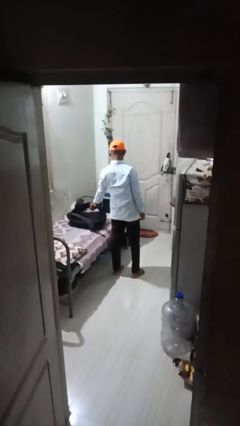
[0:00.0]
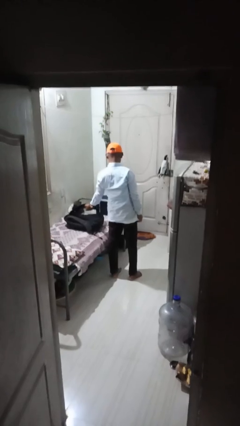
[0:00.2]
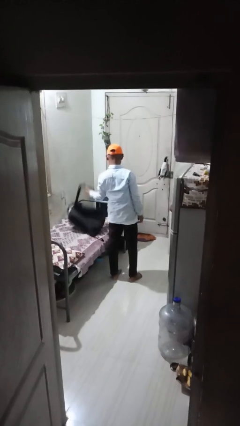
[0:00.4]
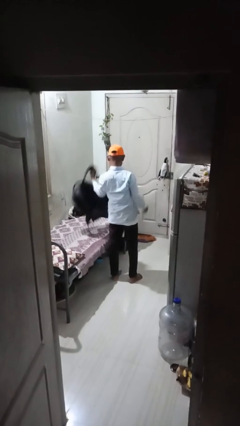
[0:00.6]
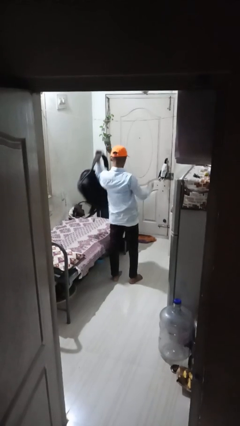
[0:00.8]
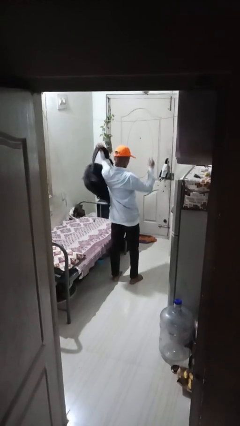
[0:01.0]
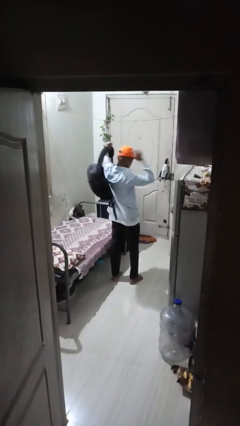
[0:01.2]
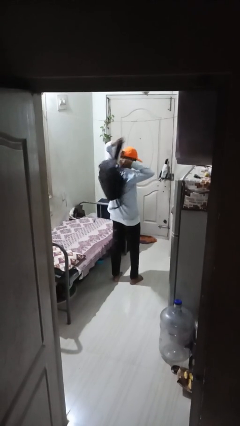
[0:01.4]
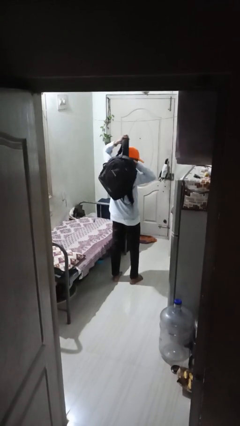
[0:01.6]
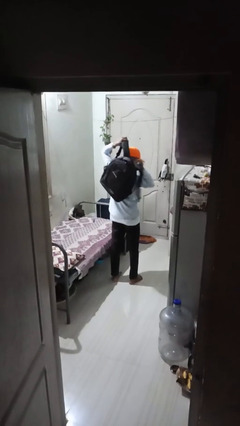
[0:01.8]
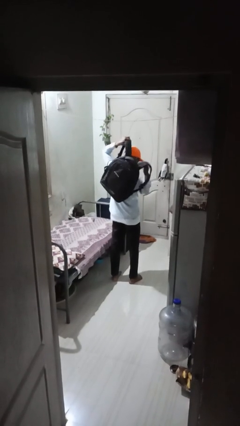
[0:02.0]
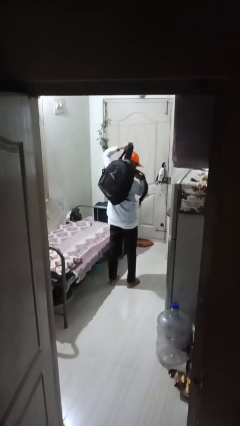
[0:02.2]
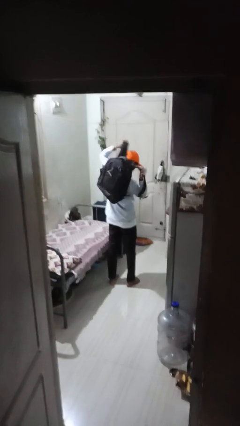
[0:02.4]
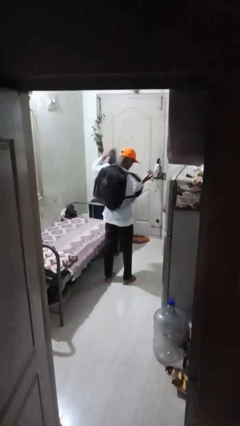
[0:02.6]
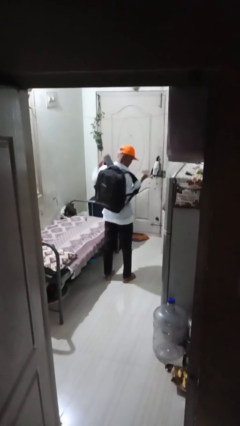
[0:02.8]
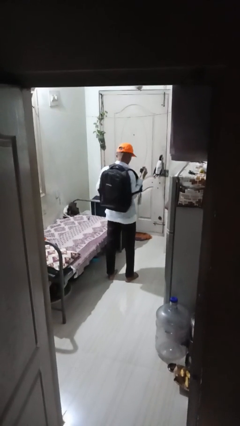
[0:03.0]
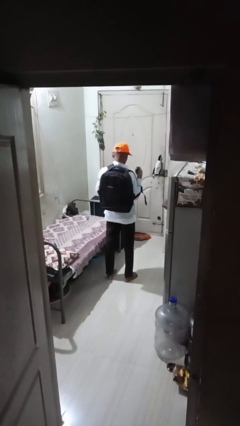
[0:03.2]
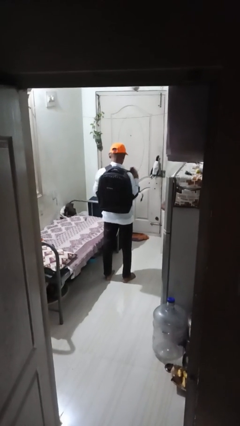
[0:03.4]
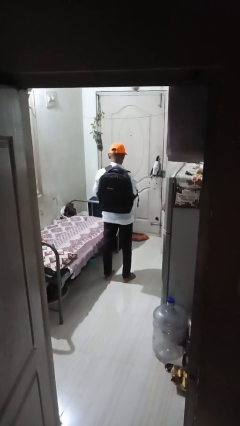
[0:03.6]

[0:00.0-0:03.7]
person puts on backpack

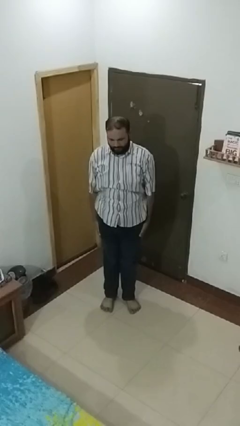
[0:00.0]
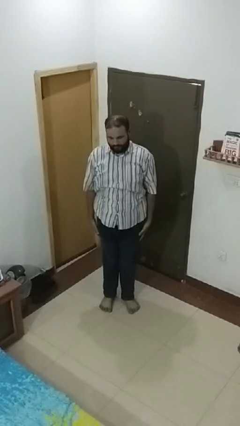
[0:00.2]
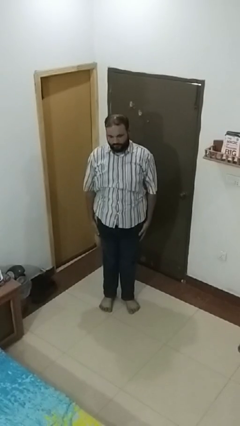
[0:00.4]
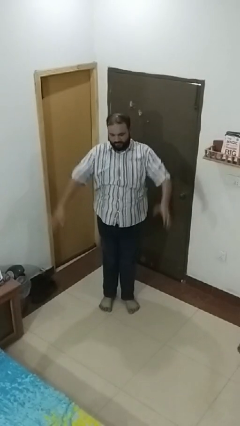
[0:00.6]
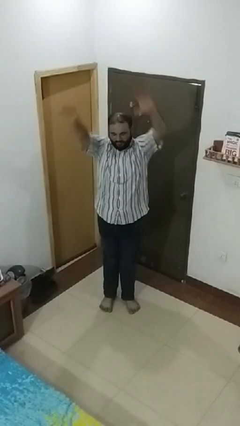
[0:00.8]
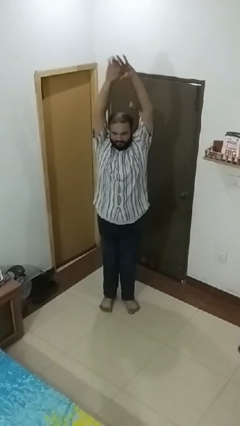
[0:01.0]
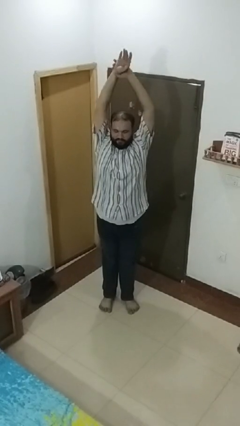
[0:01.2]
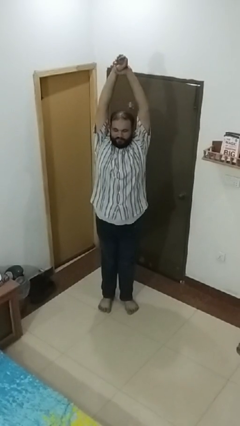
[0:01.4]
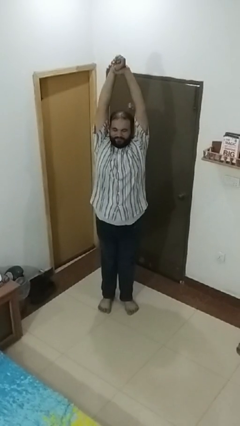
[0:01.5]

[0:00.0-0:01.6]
person stretches arms over head

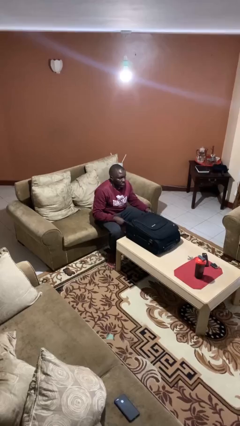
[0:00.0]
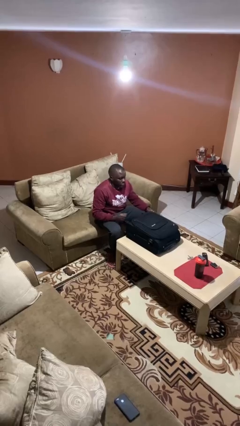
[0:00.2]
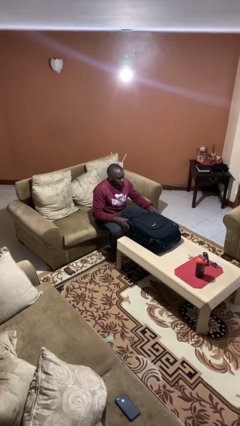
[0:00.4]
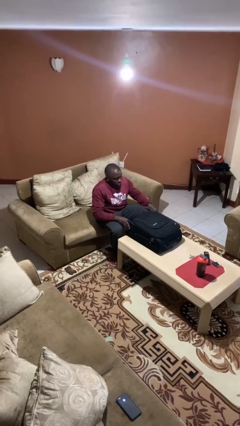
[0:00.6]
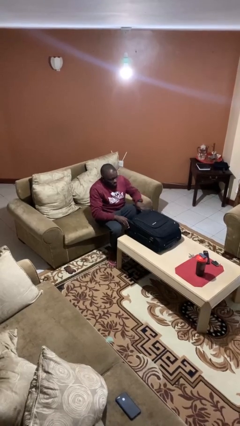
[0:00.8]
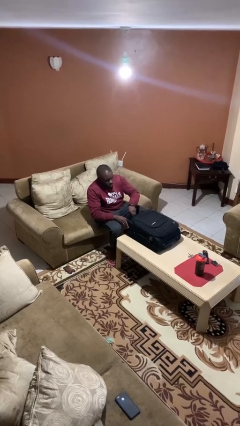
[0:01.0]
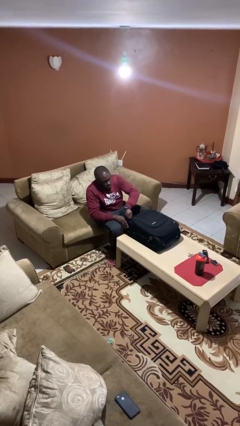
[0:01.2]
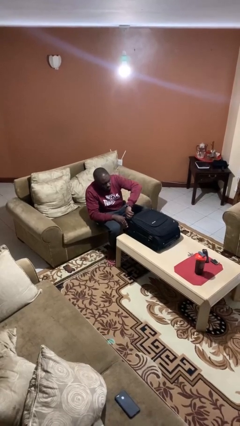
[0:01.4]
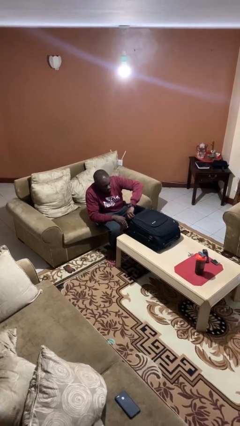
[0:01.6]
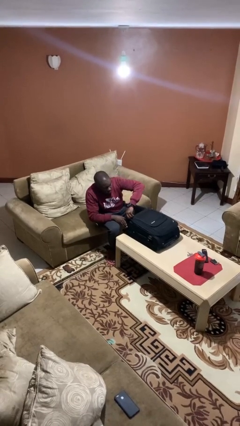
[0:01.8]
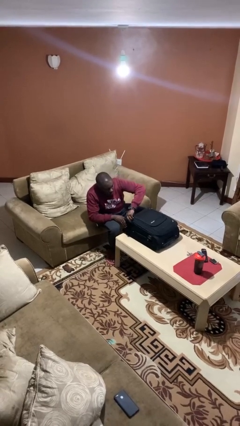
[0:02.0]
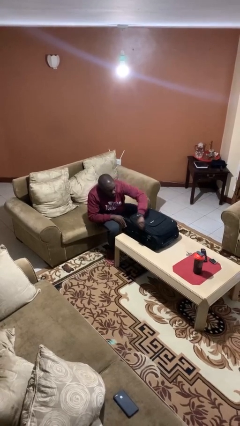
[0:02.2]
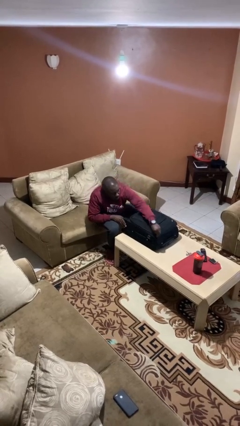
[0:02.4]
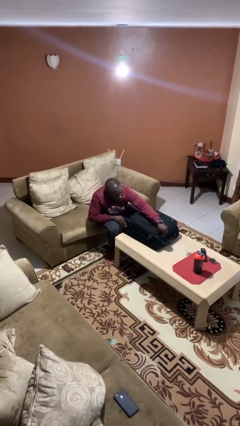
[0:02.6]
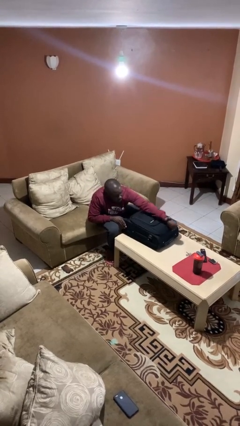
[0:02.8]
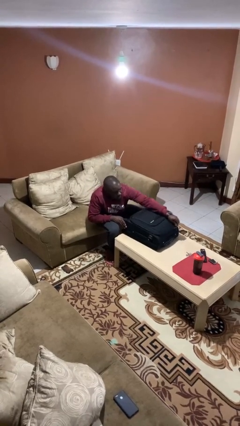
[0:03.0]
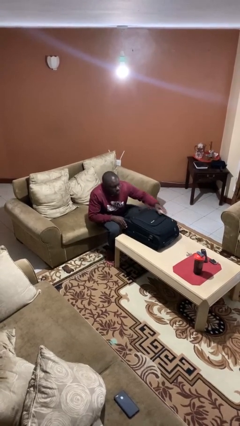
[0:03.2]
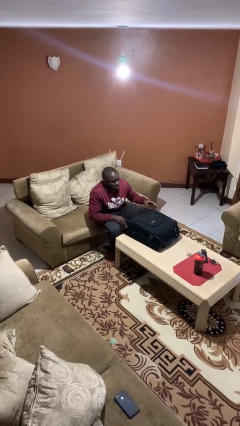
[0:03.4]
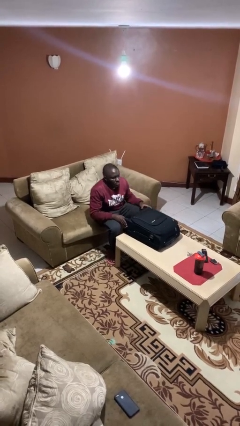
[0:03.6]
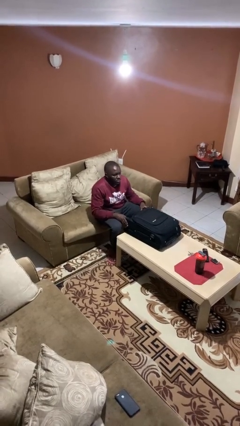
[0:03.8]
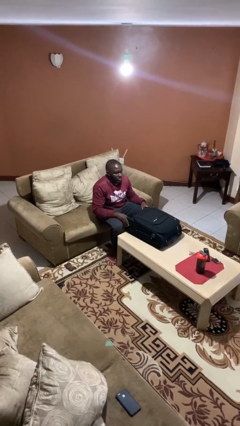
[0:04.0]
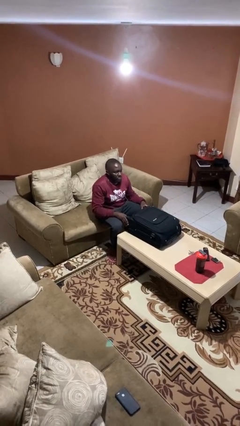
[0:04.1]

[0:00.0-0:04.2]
person closes suitcase

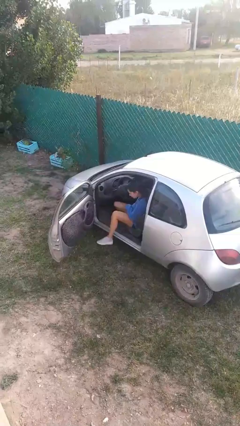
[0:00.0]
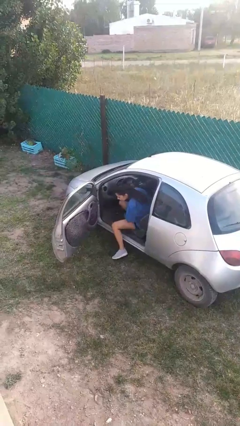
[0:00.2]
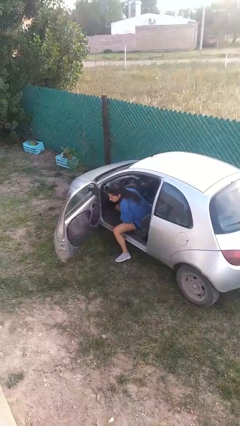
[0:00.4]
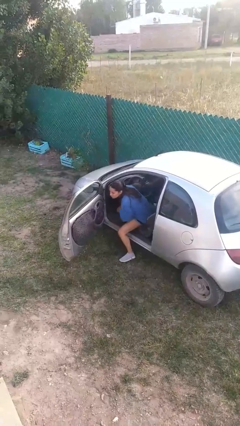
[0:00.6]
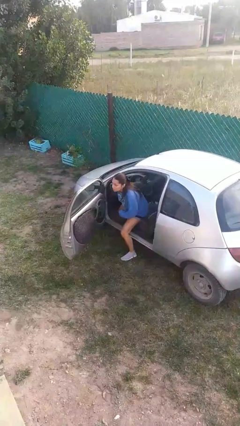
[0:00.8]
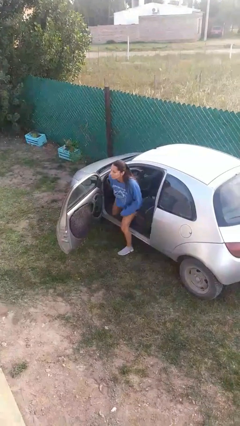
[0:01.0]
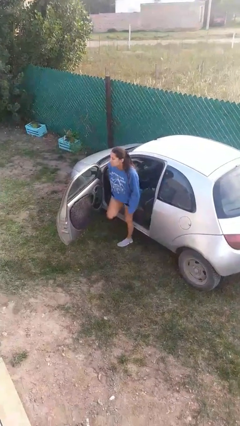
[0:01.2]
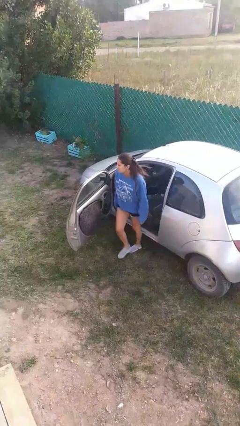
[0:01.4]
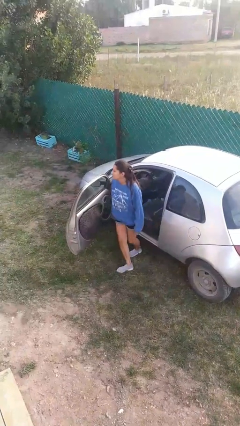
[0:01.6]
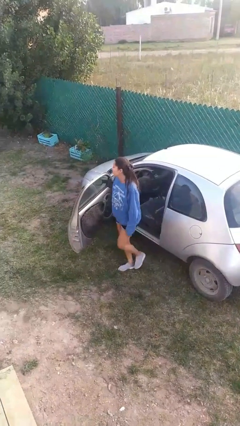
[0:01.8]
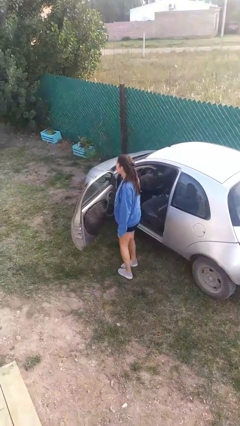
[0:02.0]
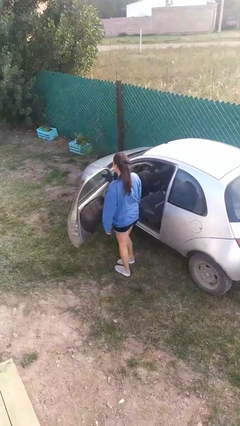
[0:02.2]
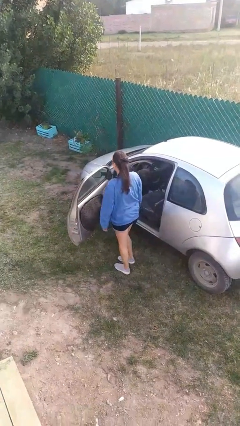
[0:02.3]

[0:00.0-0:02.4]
person exits car

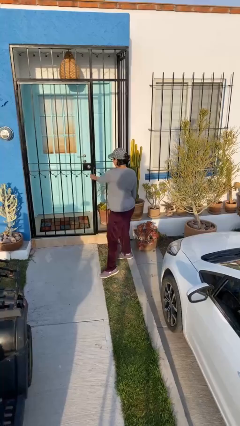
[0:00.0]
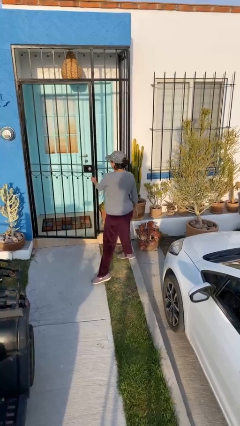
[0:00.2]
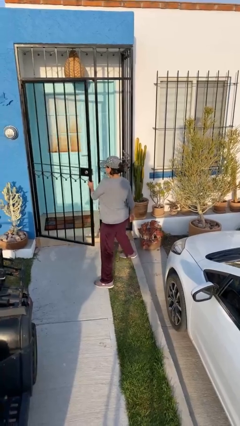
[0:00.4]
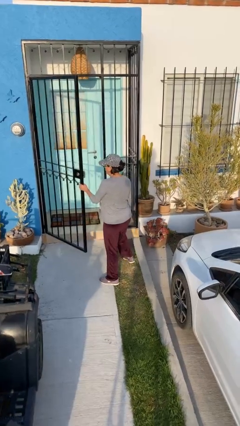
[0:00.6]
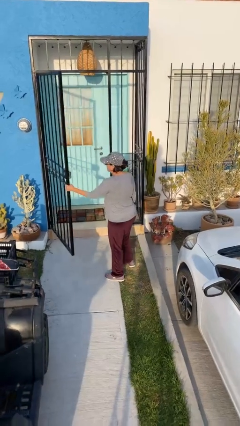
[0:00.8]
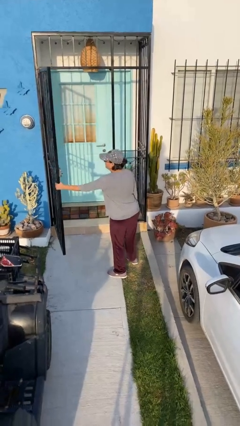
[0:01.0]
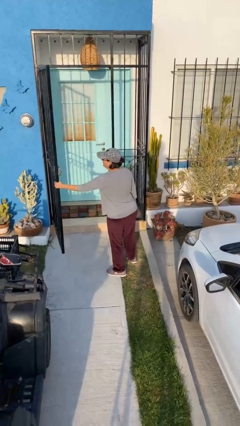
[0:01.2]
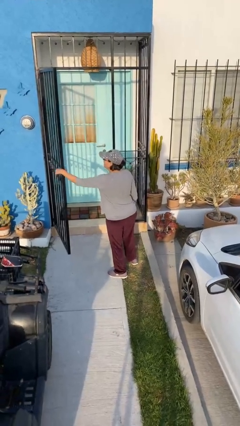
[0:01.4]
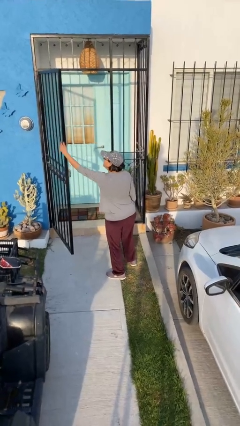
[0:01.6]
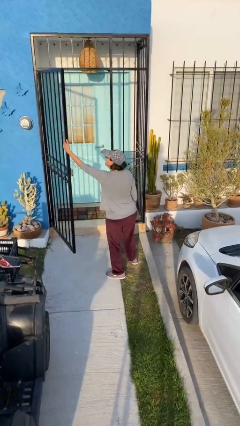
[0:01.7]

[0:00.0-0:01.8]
person opens facility door

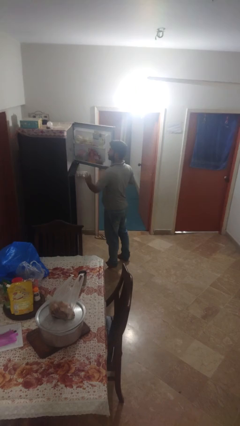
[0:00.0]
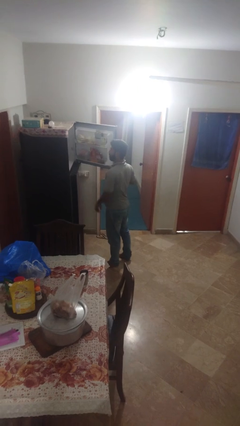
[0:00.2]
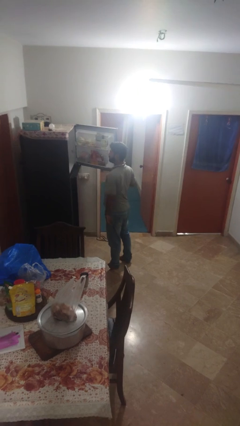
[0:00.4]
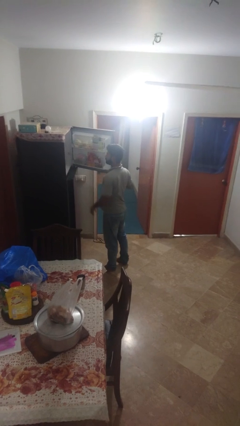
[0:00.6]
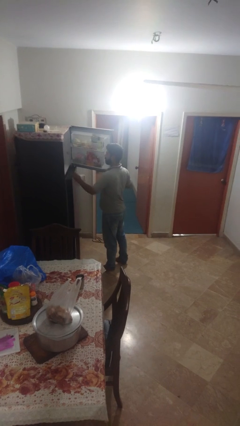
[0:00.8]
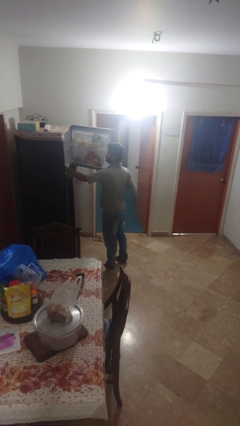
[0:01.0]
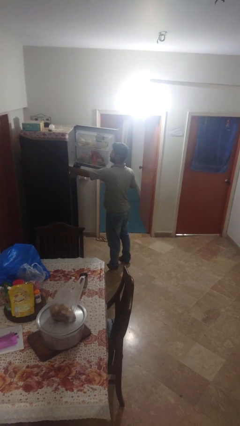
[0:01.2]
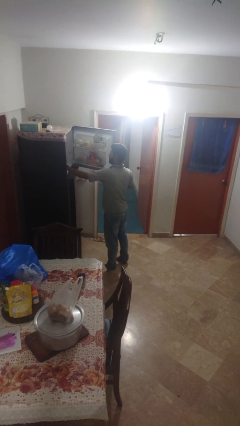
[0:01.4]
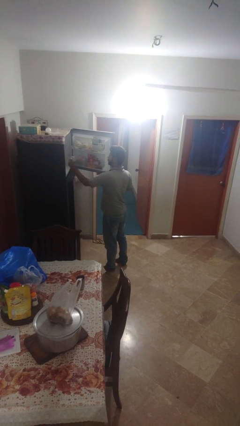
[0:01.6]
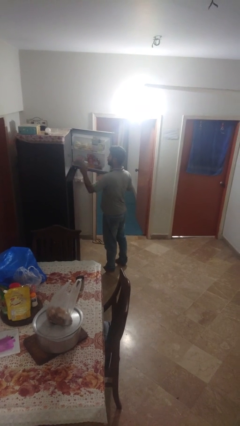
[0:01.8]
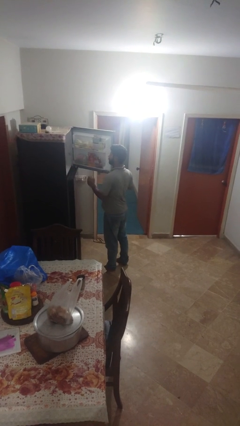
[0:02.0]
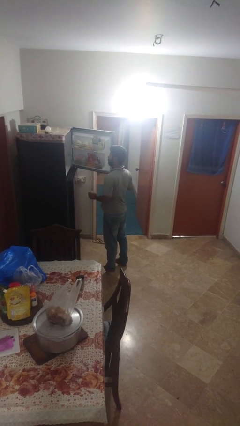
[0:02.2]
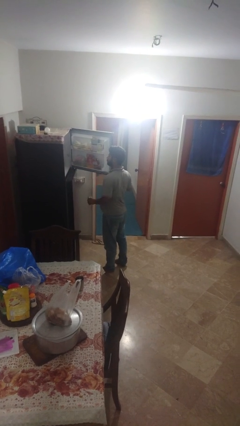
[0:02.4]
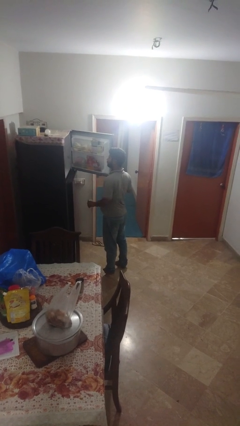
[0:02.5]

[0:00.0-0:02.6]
person takes object from refrigerator

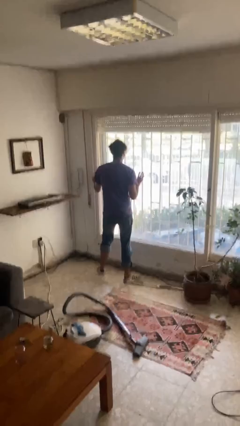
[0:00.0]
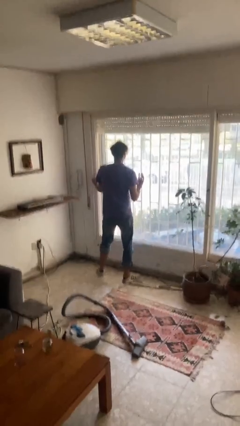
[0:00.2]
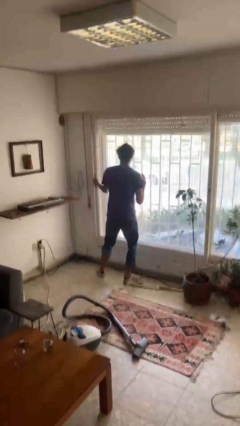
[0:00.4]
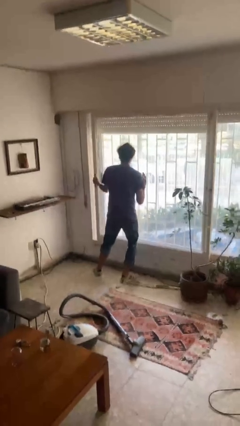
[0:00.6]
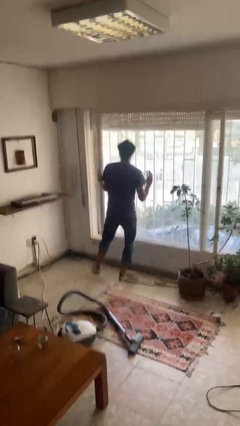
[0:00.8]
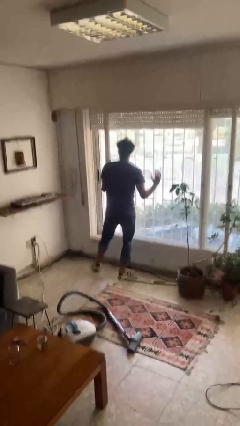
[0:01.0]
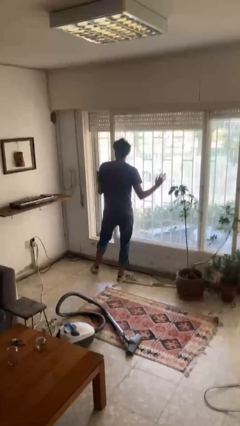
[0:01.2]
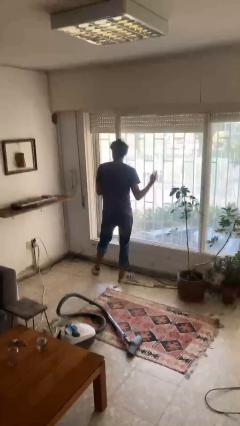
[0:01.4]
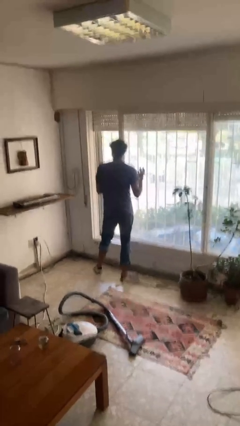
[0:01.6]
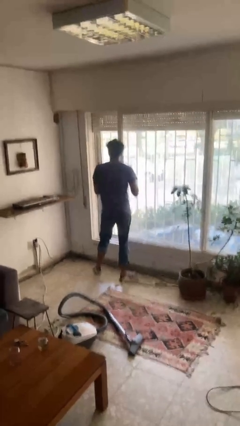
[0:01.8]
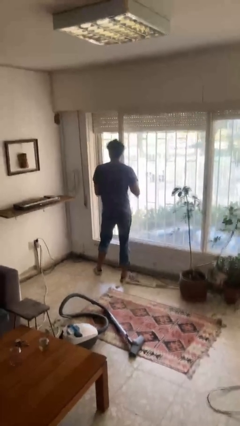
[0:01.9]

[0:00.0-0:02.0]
person opens sliding door
